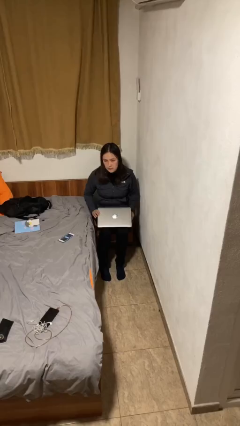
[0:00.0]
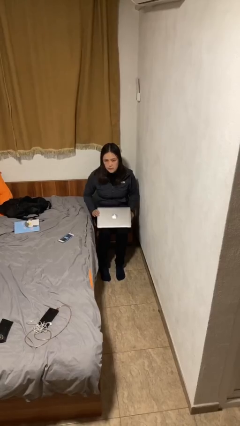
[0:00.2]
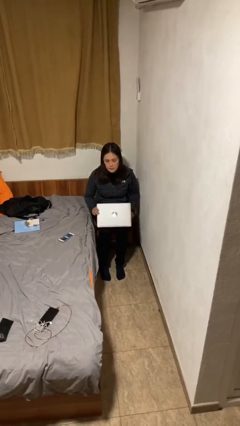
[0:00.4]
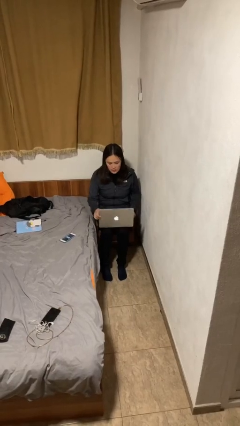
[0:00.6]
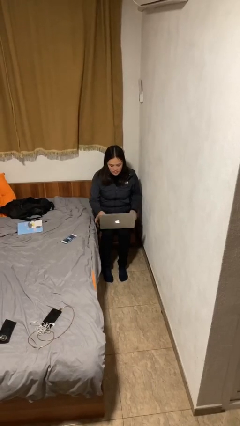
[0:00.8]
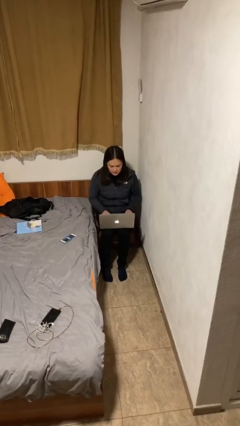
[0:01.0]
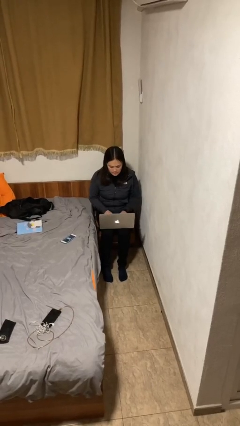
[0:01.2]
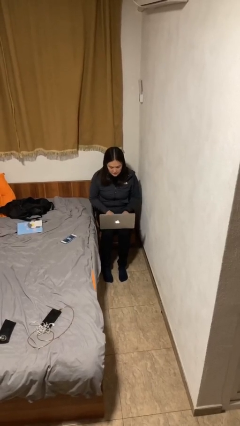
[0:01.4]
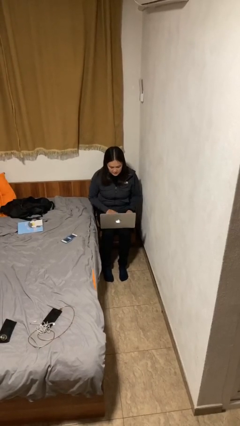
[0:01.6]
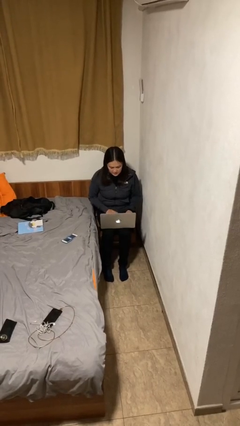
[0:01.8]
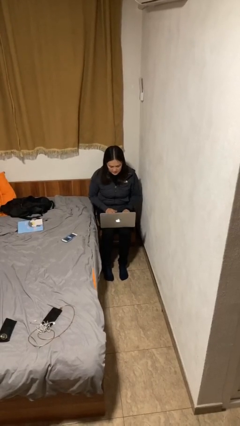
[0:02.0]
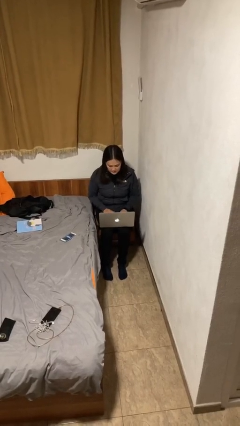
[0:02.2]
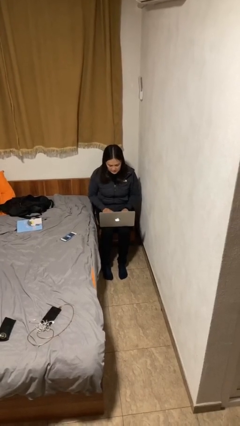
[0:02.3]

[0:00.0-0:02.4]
person interacts with laptop

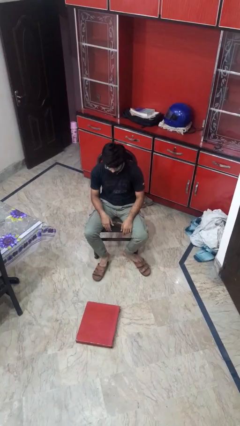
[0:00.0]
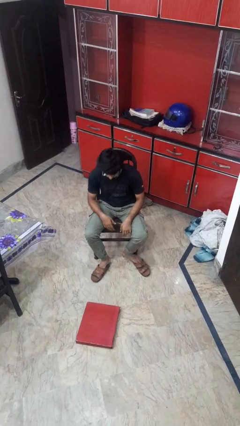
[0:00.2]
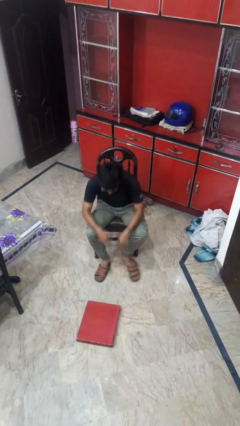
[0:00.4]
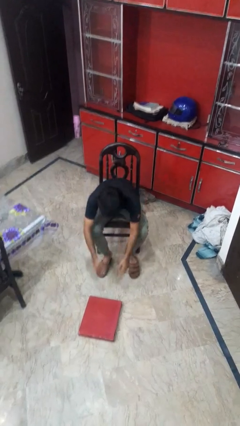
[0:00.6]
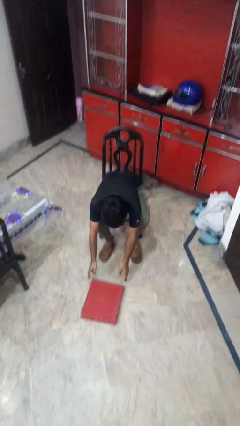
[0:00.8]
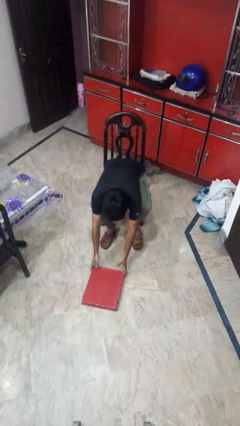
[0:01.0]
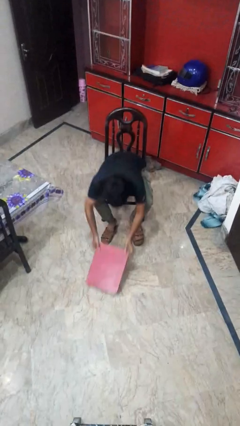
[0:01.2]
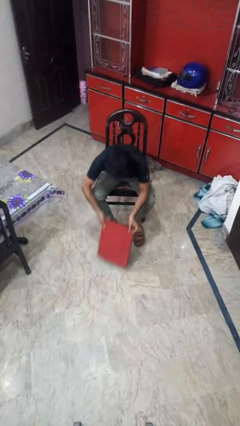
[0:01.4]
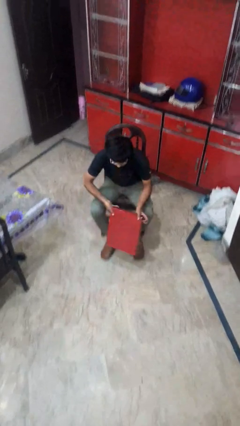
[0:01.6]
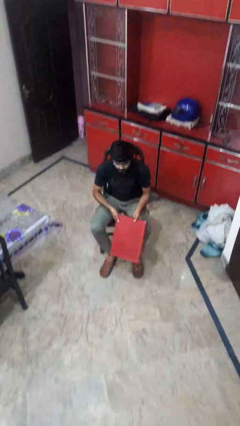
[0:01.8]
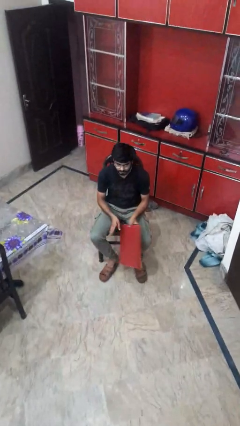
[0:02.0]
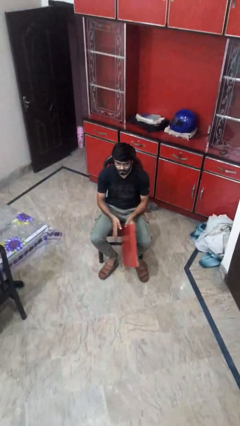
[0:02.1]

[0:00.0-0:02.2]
person picks up object from floor

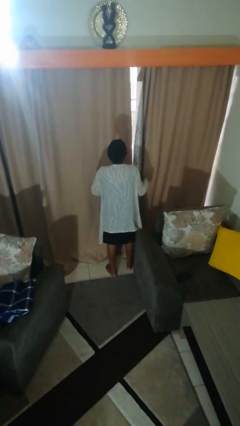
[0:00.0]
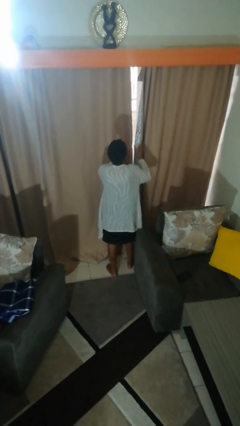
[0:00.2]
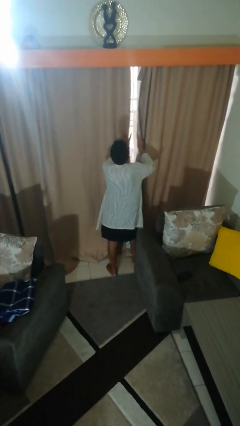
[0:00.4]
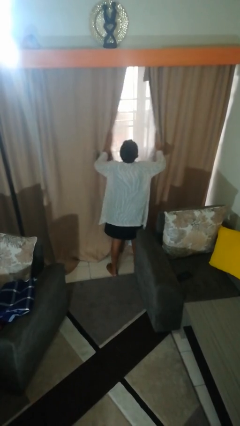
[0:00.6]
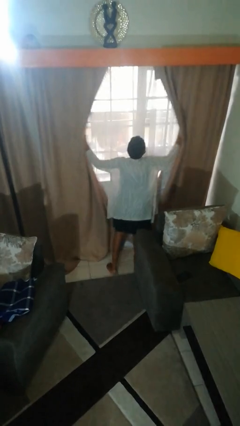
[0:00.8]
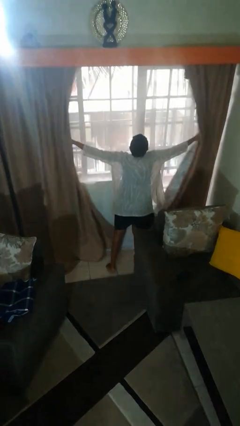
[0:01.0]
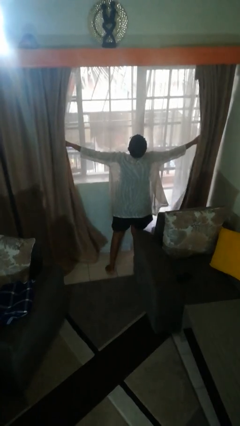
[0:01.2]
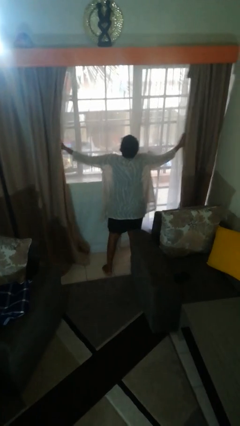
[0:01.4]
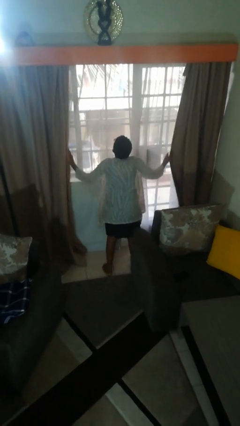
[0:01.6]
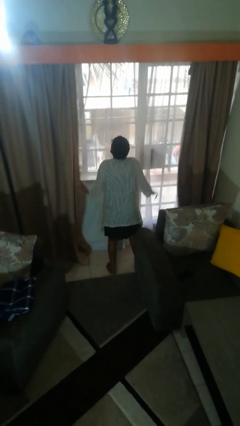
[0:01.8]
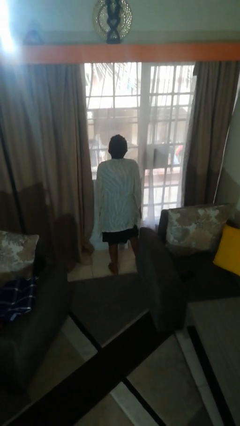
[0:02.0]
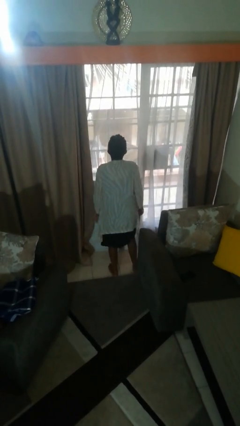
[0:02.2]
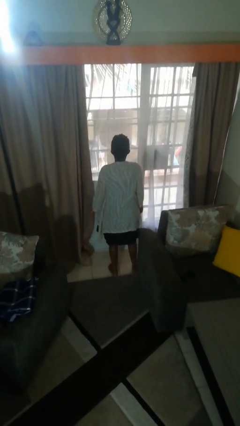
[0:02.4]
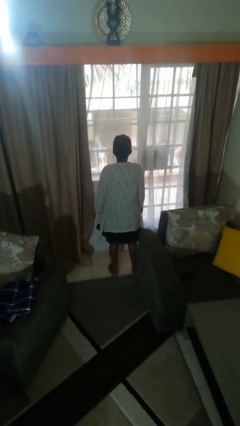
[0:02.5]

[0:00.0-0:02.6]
person opens curtains

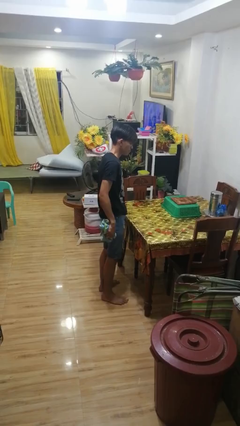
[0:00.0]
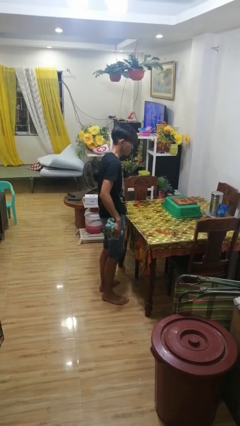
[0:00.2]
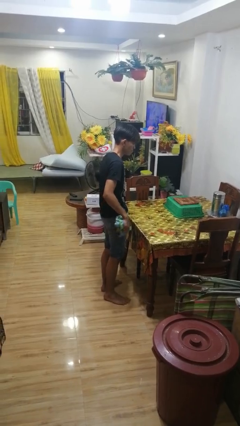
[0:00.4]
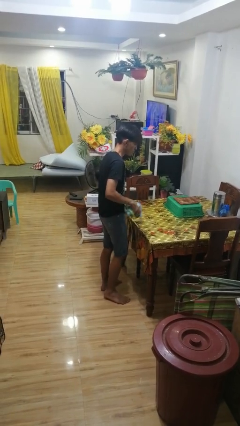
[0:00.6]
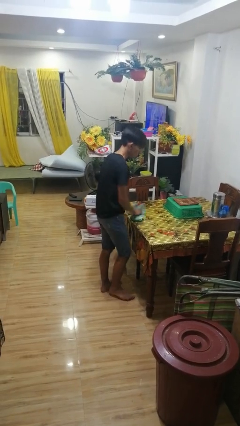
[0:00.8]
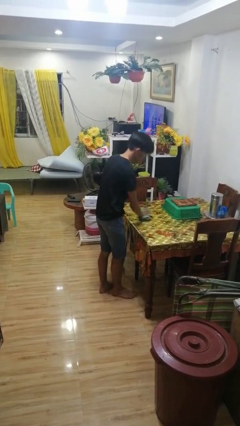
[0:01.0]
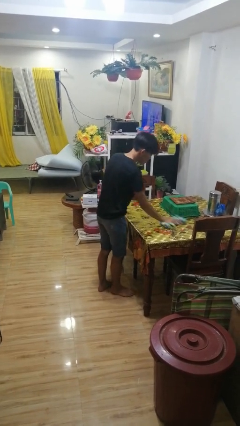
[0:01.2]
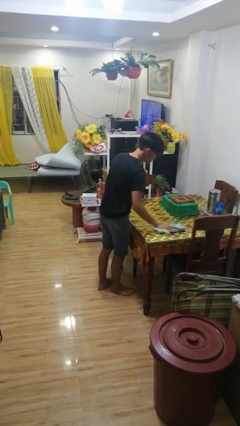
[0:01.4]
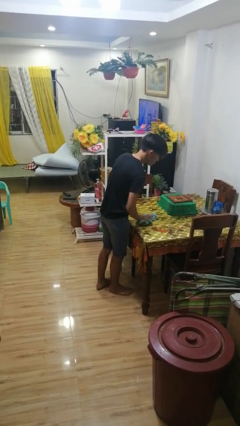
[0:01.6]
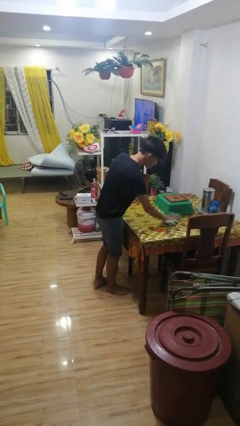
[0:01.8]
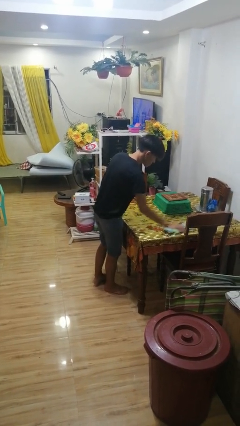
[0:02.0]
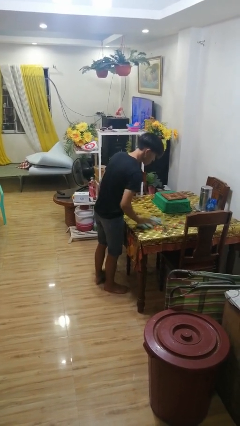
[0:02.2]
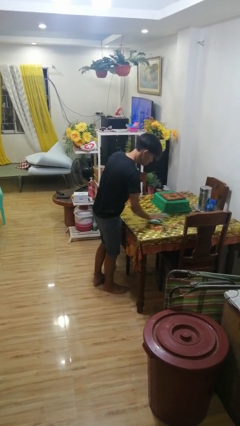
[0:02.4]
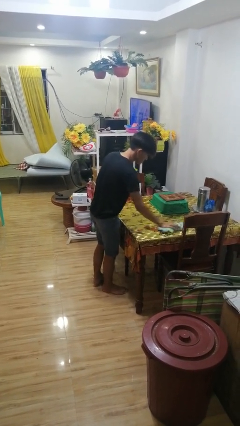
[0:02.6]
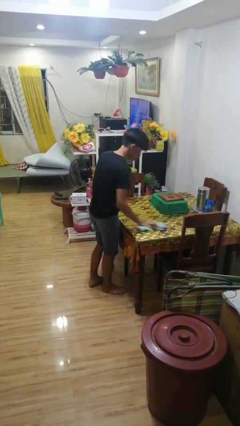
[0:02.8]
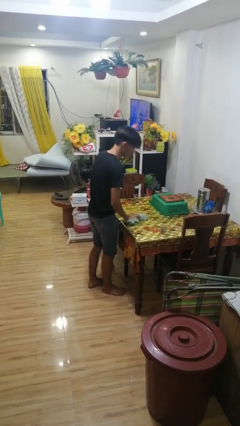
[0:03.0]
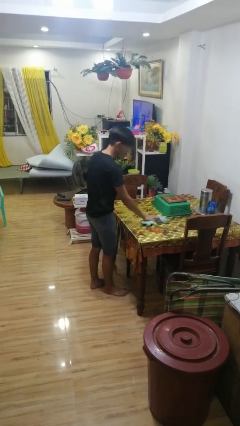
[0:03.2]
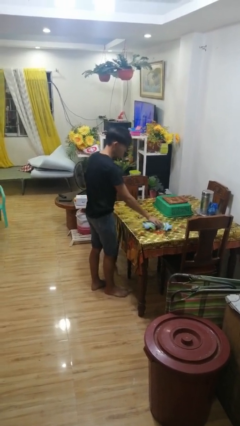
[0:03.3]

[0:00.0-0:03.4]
person cleans table with rag

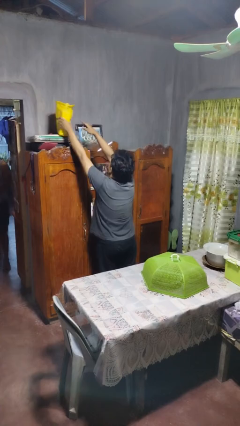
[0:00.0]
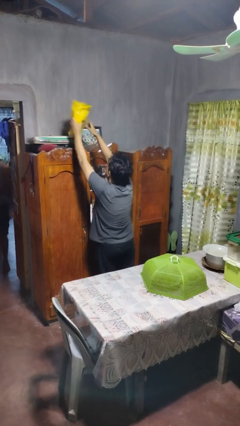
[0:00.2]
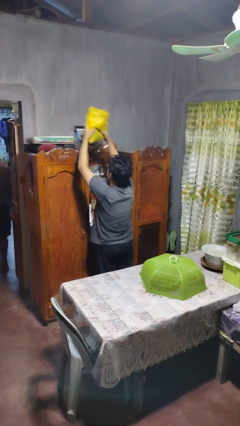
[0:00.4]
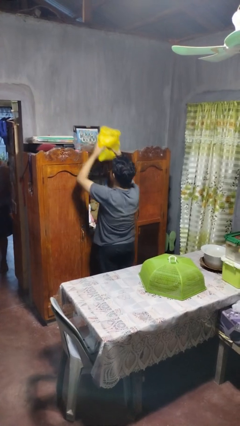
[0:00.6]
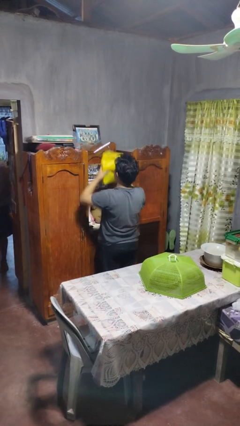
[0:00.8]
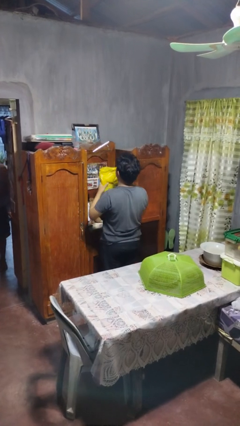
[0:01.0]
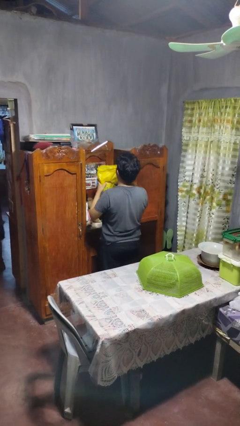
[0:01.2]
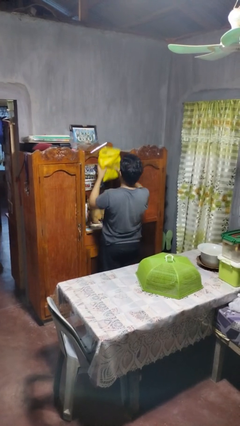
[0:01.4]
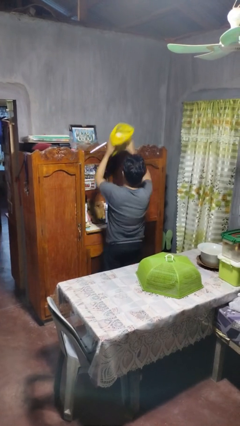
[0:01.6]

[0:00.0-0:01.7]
person picks up object from shelf

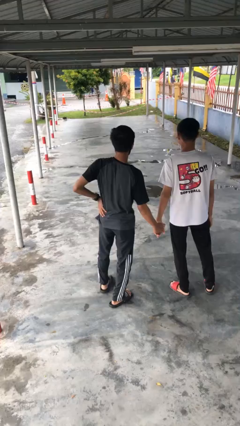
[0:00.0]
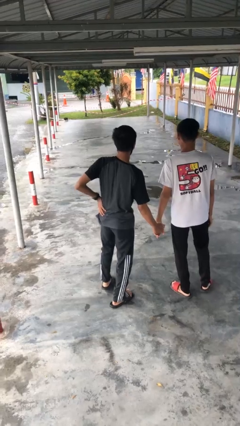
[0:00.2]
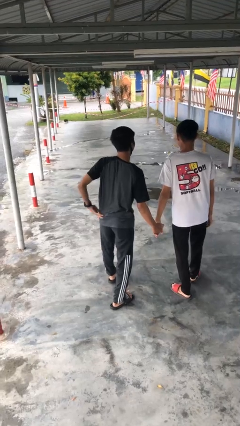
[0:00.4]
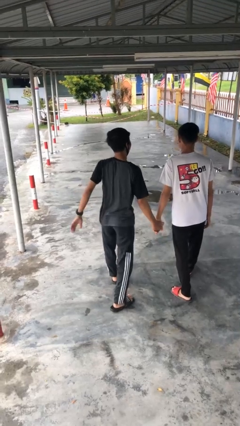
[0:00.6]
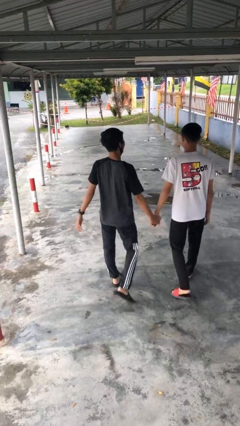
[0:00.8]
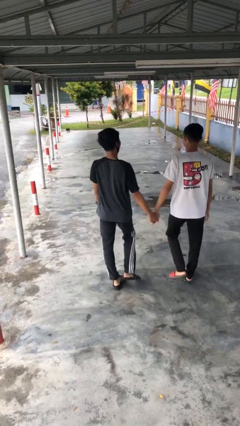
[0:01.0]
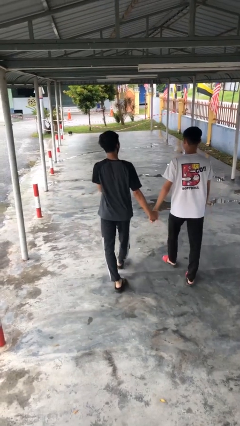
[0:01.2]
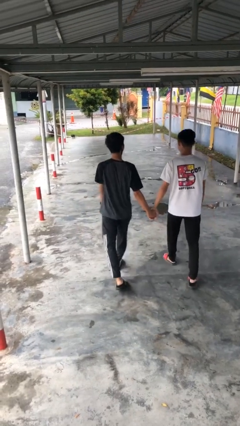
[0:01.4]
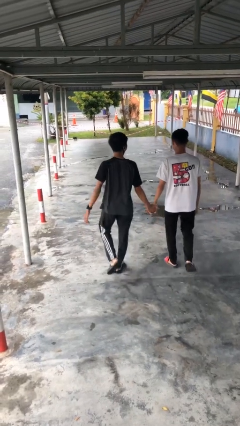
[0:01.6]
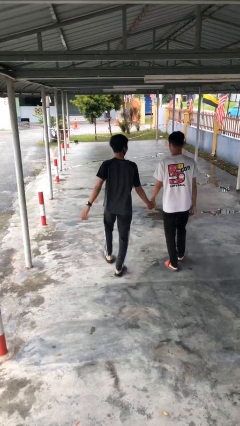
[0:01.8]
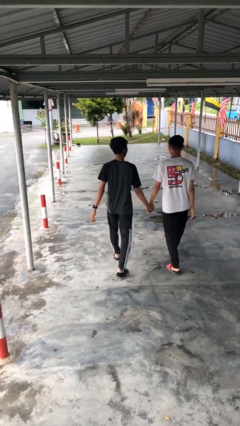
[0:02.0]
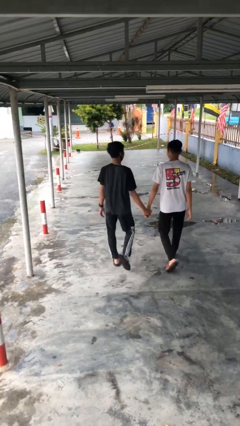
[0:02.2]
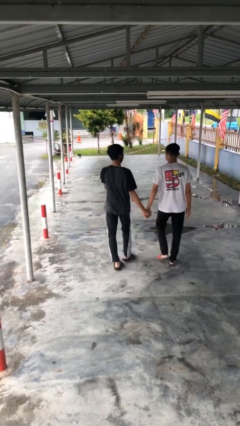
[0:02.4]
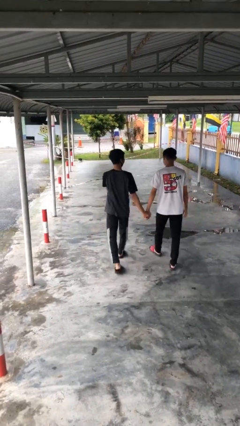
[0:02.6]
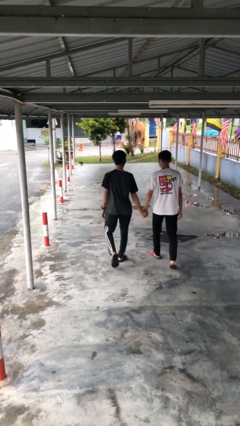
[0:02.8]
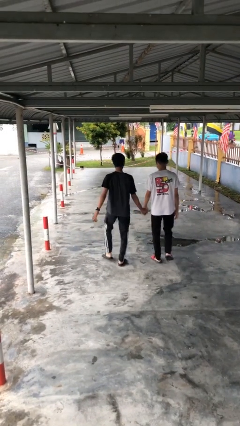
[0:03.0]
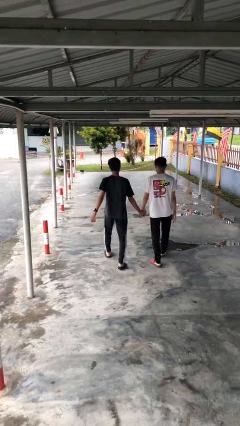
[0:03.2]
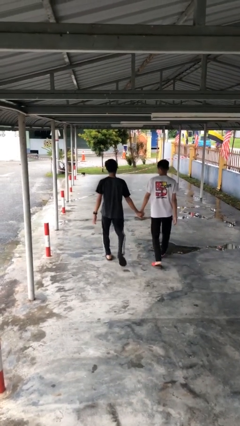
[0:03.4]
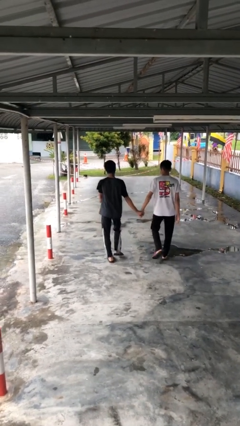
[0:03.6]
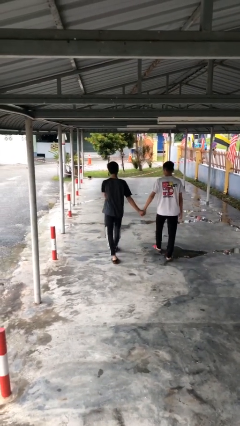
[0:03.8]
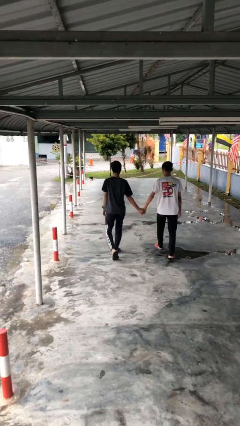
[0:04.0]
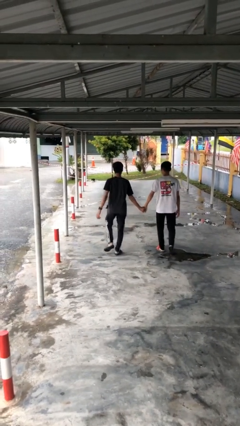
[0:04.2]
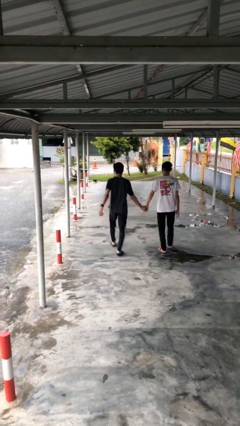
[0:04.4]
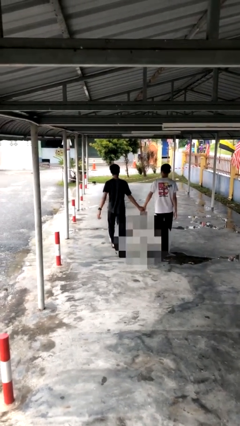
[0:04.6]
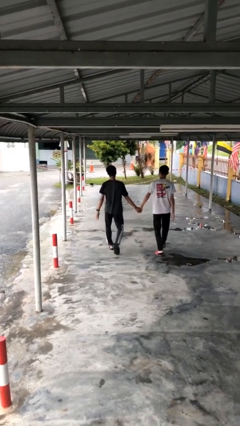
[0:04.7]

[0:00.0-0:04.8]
person holds hand
